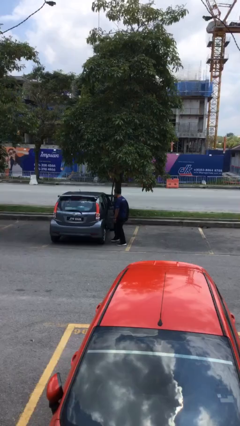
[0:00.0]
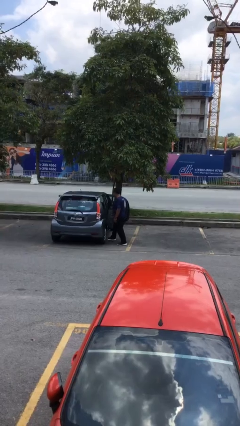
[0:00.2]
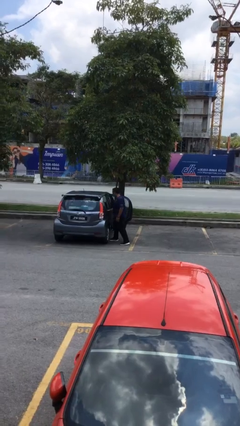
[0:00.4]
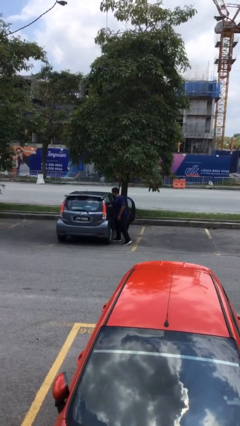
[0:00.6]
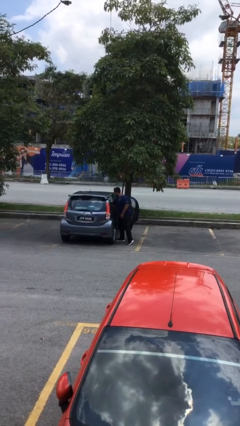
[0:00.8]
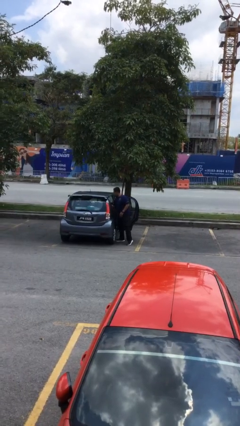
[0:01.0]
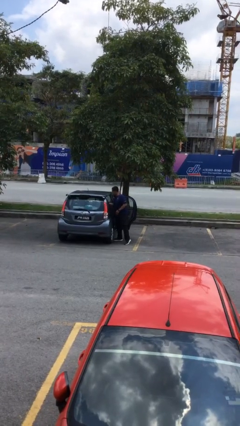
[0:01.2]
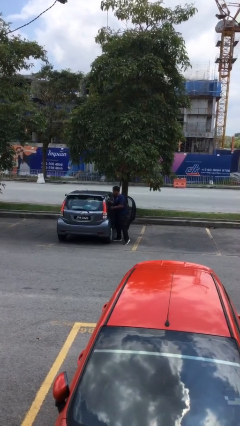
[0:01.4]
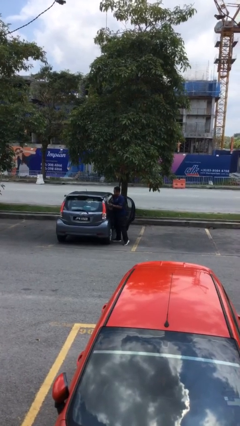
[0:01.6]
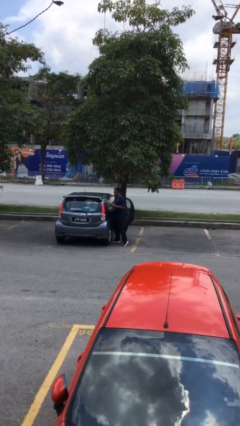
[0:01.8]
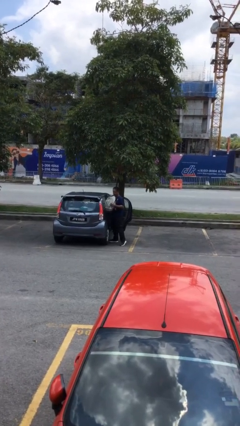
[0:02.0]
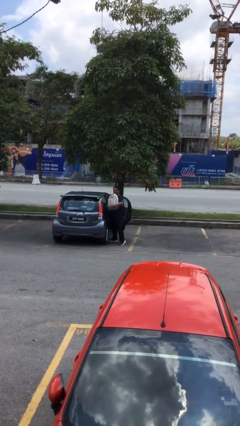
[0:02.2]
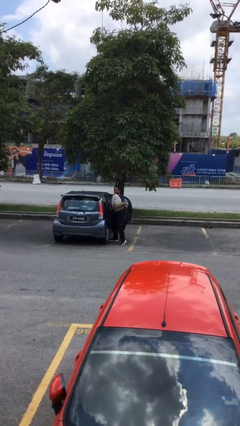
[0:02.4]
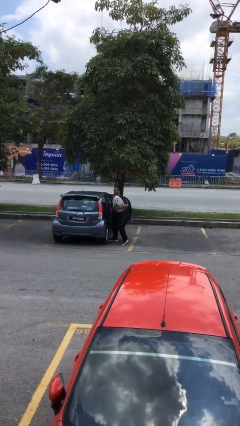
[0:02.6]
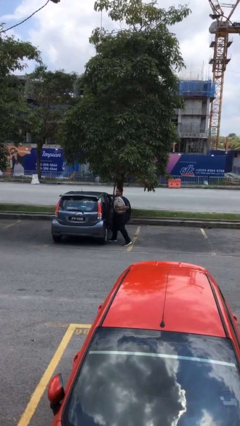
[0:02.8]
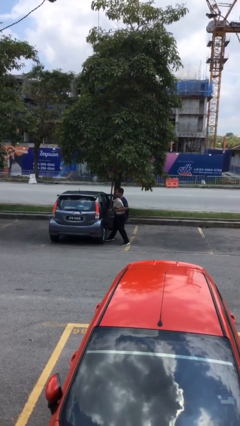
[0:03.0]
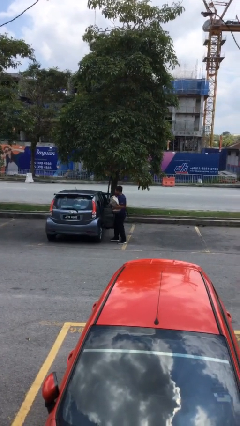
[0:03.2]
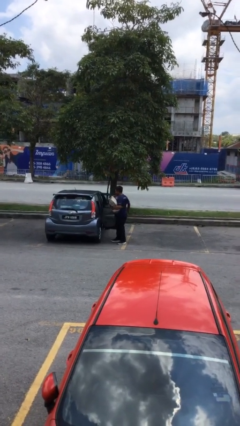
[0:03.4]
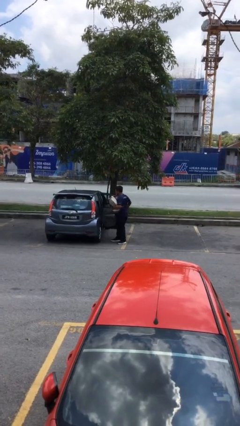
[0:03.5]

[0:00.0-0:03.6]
person unloads car

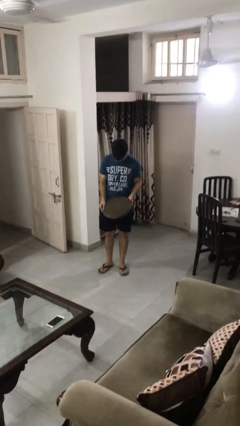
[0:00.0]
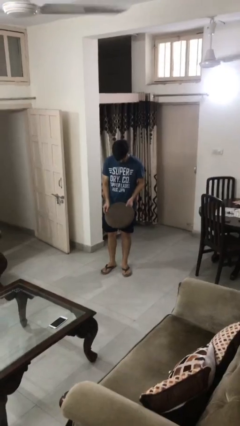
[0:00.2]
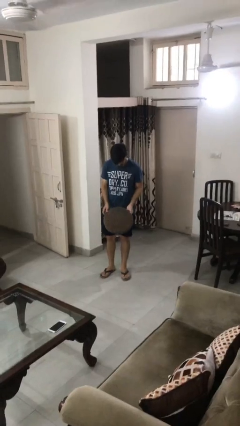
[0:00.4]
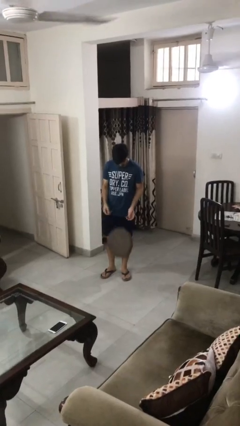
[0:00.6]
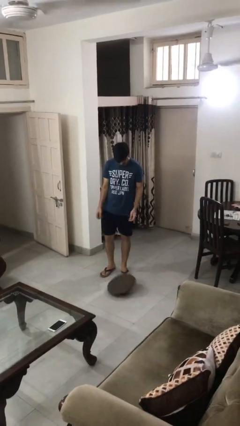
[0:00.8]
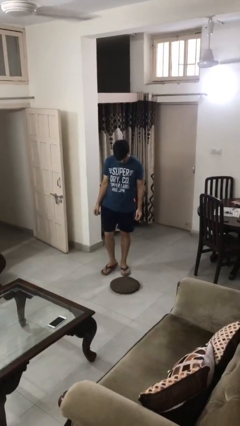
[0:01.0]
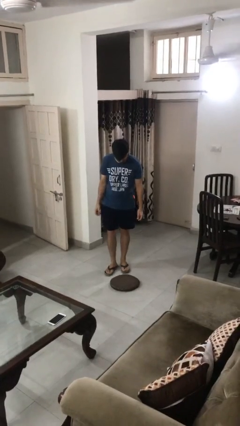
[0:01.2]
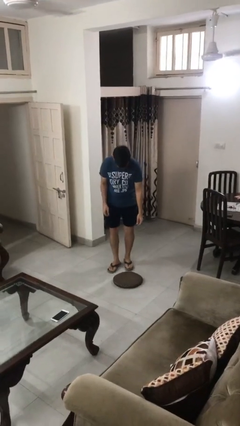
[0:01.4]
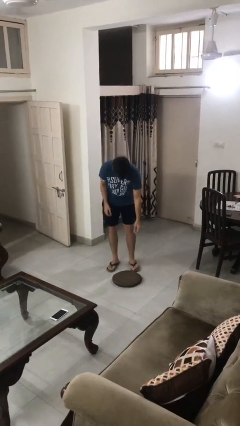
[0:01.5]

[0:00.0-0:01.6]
person drops object

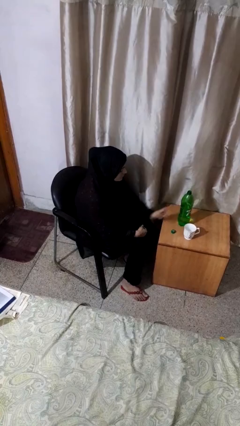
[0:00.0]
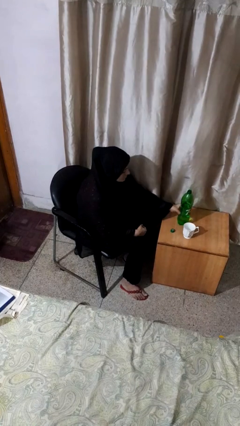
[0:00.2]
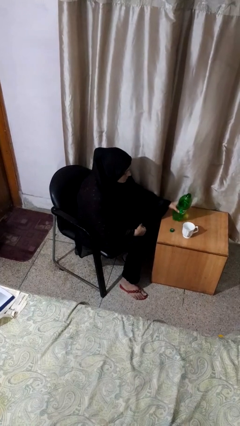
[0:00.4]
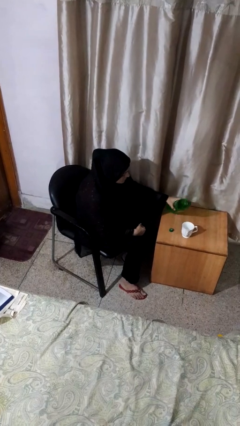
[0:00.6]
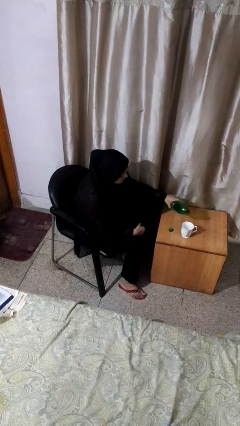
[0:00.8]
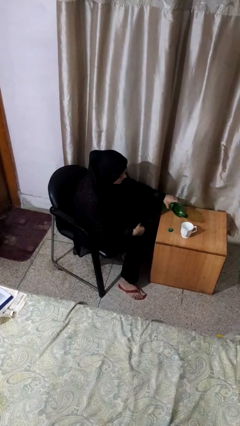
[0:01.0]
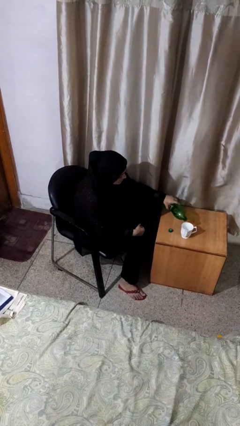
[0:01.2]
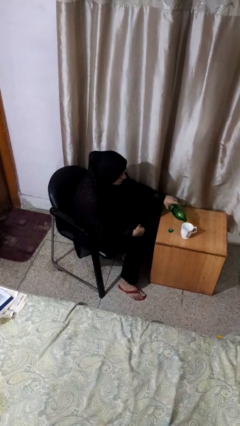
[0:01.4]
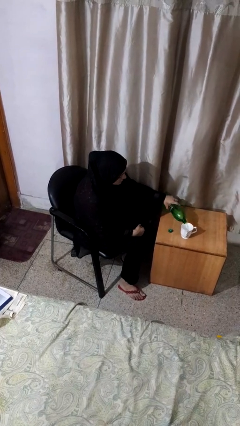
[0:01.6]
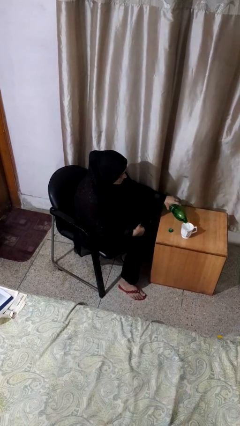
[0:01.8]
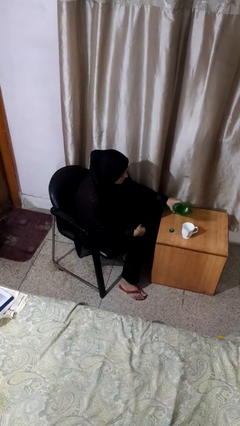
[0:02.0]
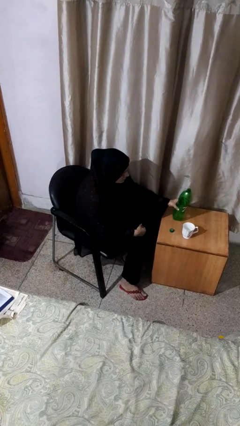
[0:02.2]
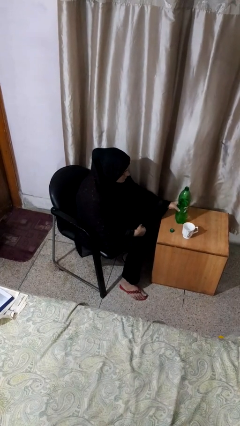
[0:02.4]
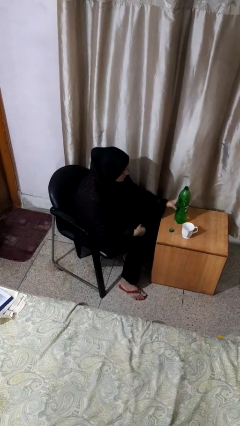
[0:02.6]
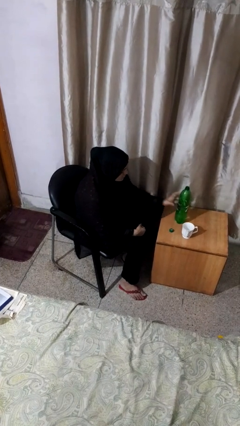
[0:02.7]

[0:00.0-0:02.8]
person pours liquid into cup

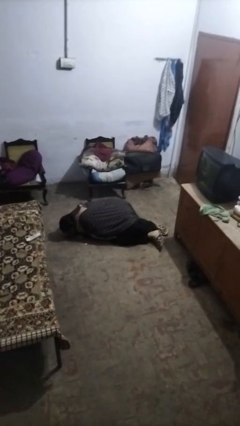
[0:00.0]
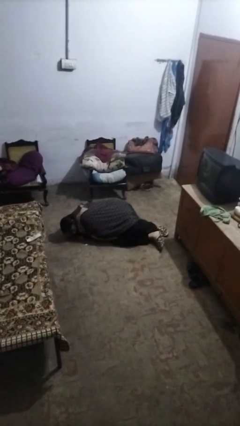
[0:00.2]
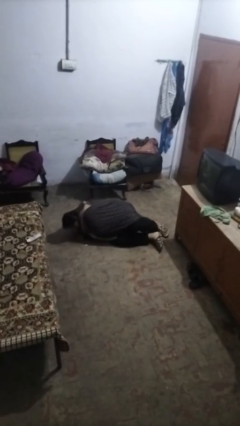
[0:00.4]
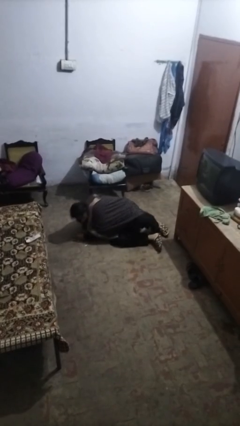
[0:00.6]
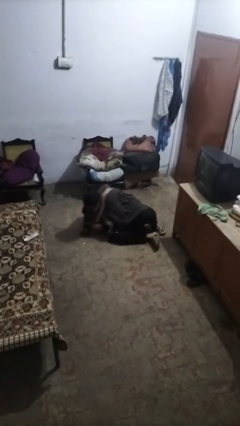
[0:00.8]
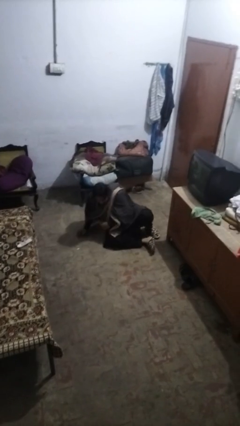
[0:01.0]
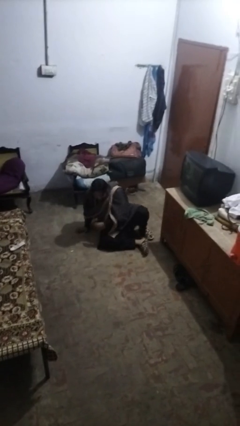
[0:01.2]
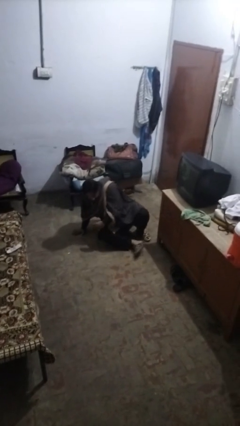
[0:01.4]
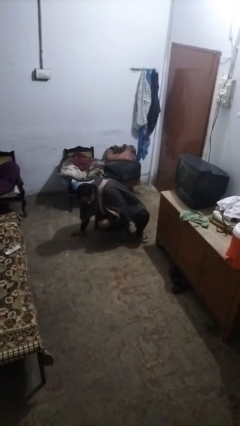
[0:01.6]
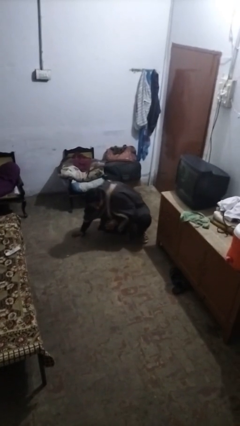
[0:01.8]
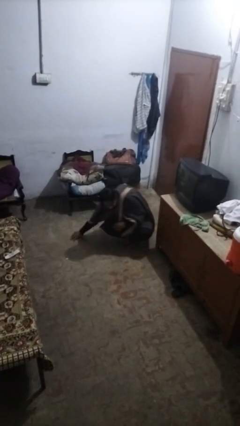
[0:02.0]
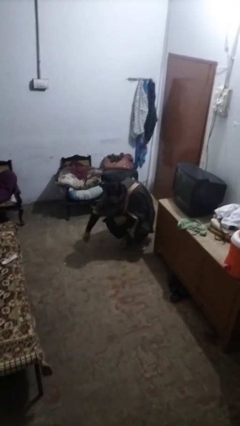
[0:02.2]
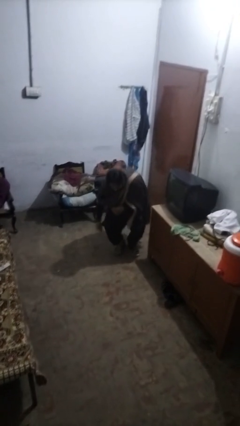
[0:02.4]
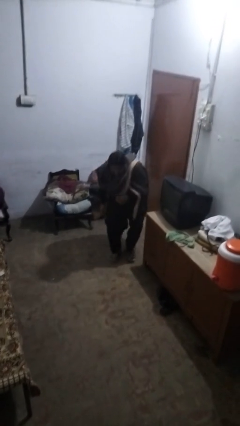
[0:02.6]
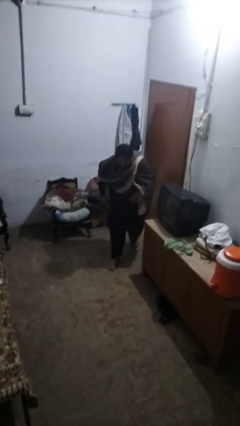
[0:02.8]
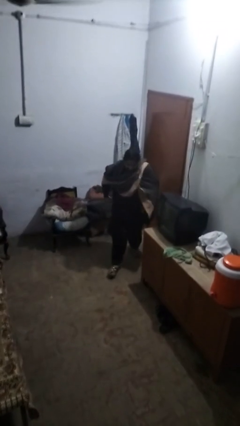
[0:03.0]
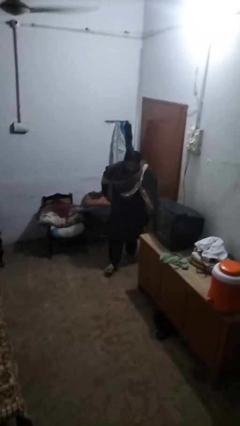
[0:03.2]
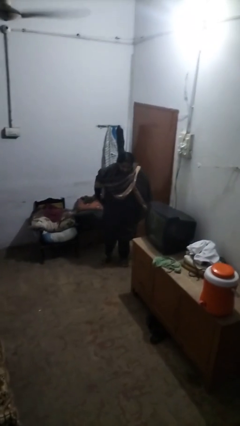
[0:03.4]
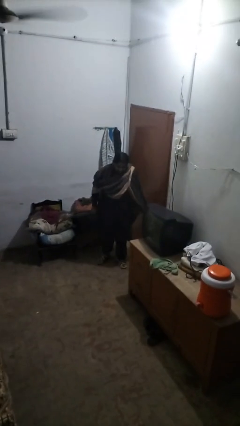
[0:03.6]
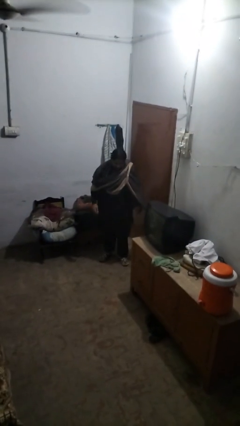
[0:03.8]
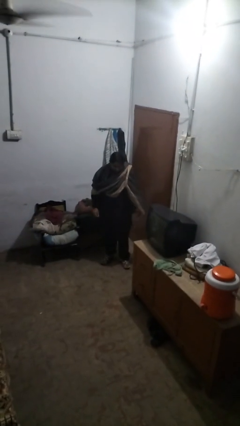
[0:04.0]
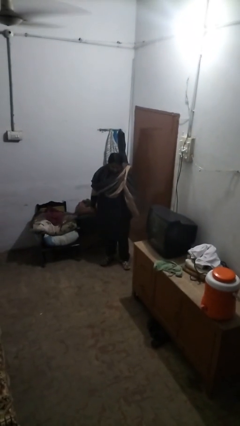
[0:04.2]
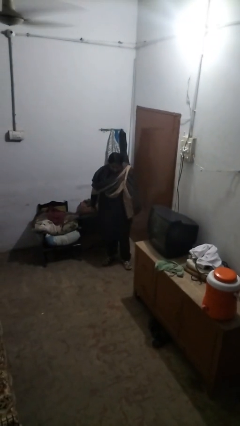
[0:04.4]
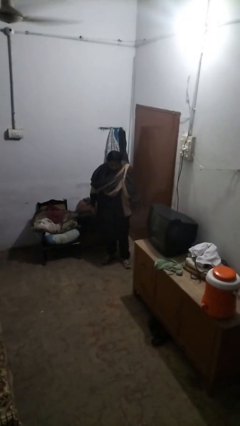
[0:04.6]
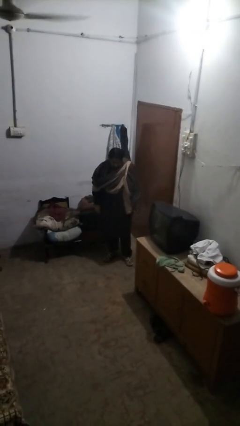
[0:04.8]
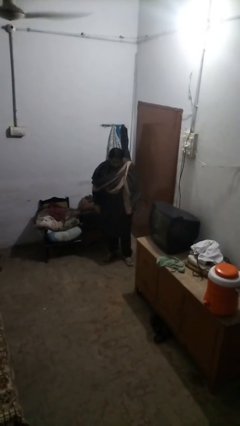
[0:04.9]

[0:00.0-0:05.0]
person stands up from floor

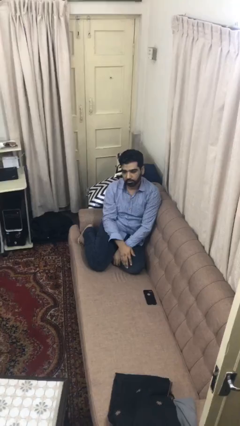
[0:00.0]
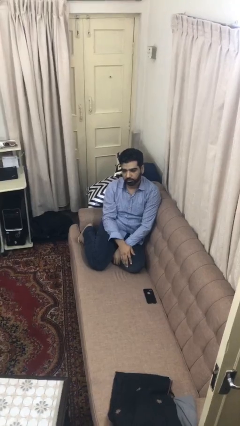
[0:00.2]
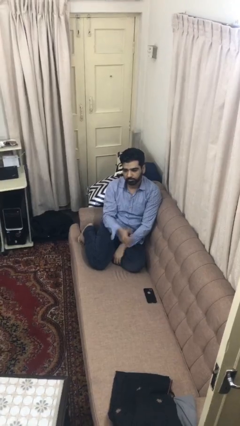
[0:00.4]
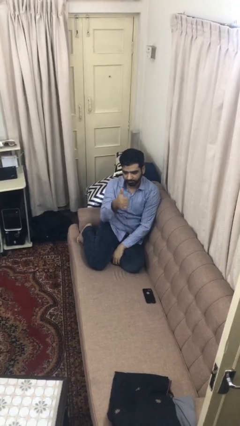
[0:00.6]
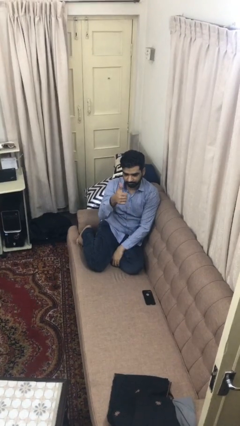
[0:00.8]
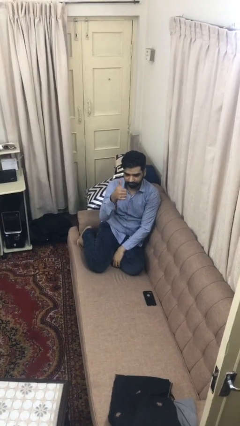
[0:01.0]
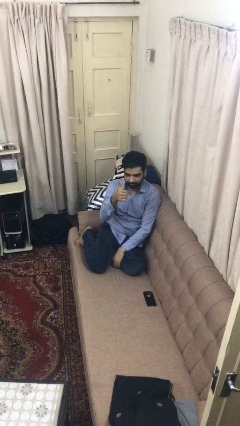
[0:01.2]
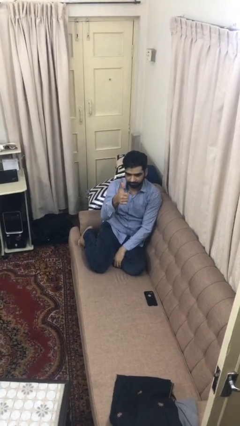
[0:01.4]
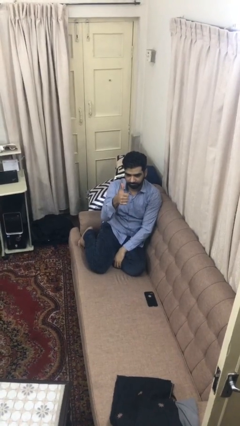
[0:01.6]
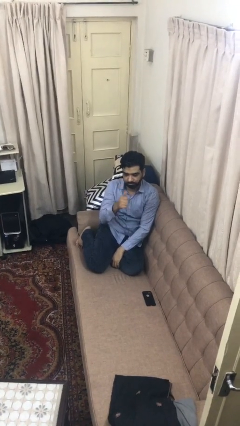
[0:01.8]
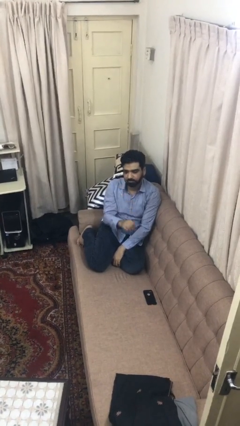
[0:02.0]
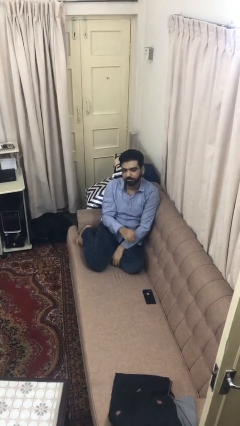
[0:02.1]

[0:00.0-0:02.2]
person gestures thumbs up

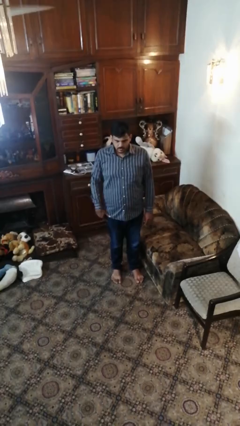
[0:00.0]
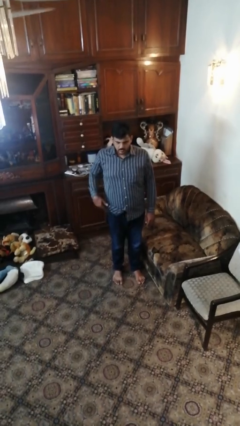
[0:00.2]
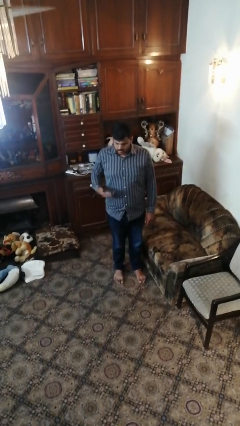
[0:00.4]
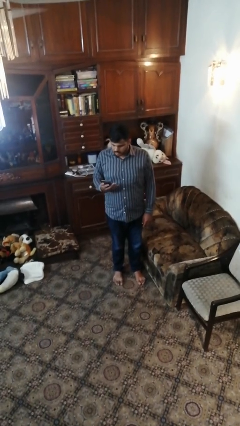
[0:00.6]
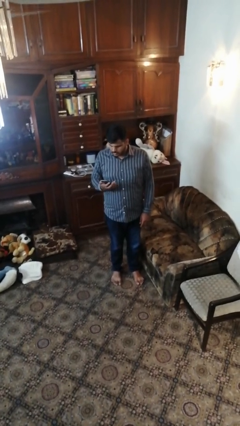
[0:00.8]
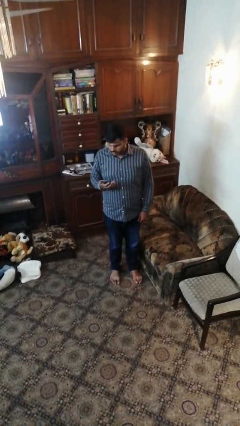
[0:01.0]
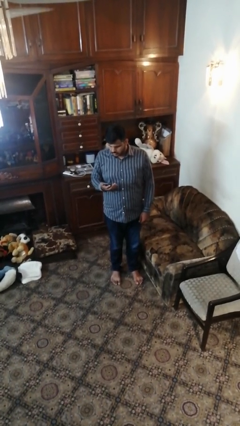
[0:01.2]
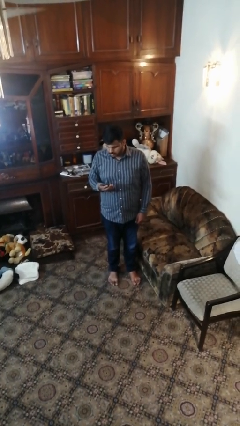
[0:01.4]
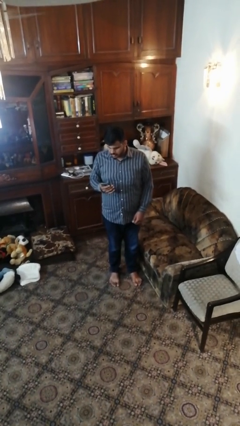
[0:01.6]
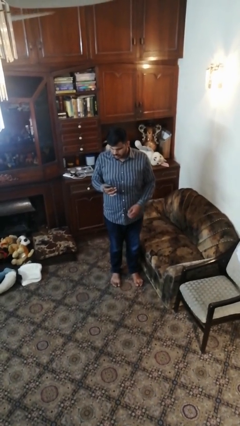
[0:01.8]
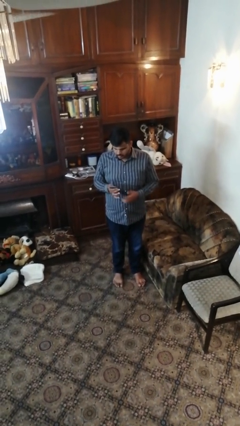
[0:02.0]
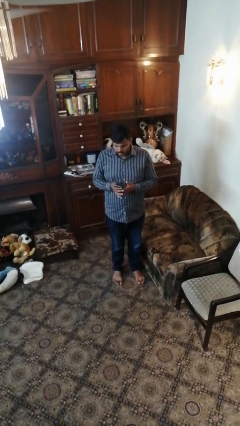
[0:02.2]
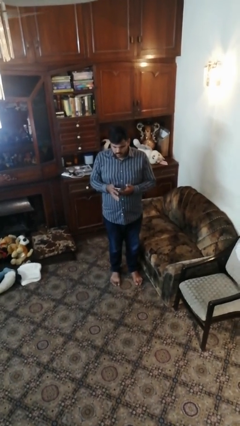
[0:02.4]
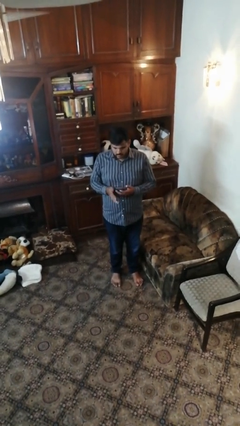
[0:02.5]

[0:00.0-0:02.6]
person takes phone from pocket
